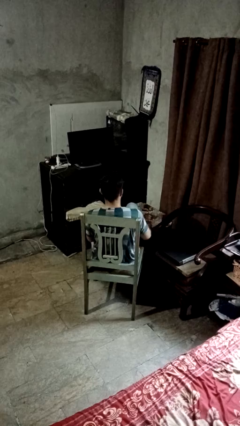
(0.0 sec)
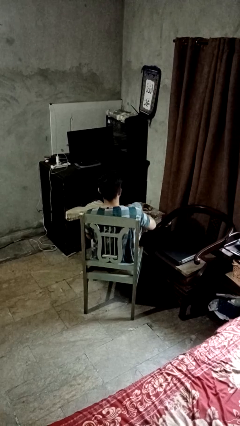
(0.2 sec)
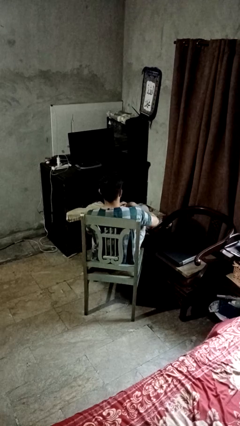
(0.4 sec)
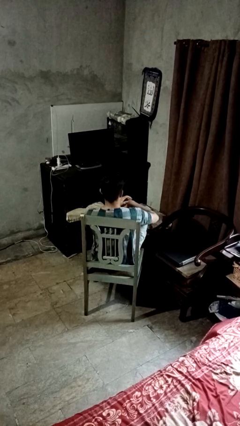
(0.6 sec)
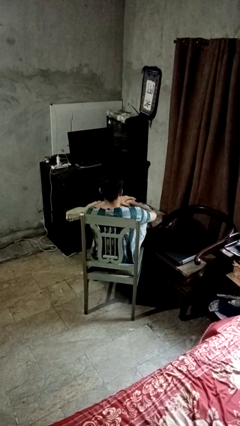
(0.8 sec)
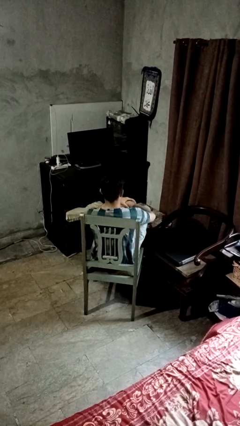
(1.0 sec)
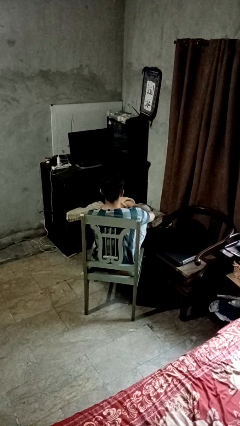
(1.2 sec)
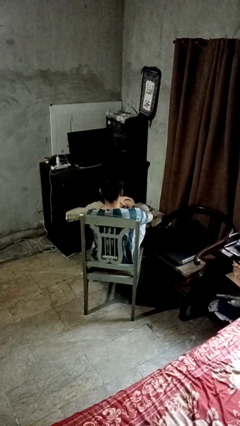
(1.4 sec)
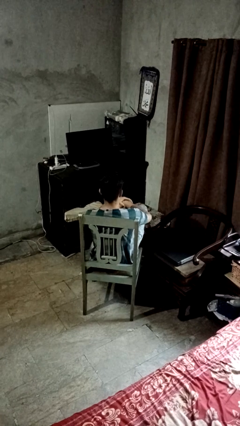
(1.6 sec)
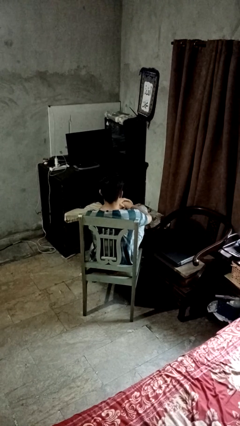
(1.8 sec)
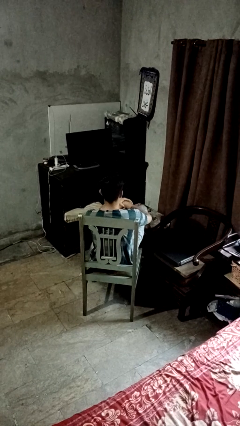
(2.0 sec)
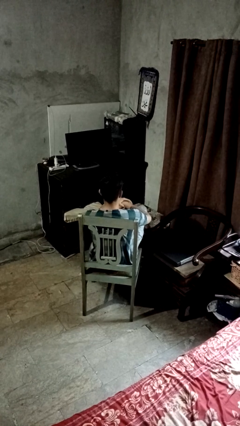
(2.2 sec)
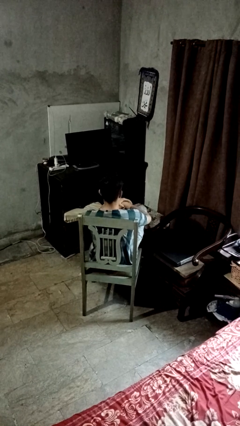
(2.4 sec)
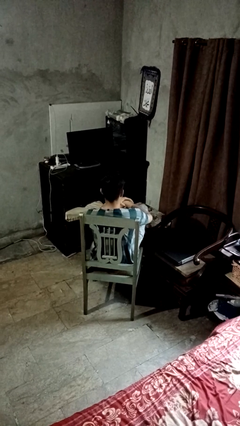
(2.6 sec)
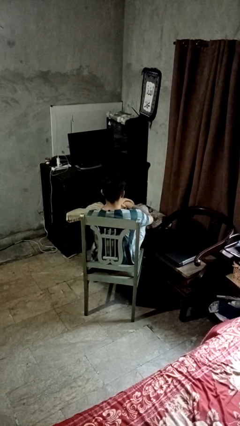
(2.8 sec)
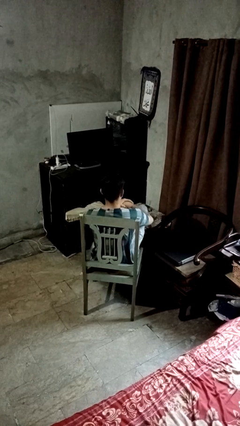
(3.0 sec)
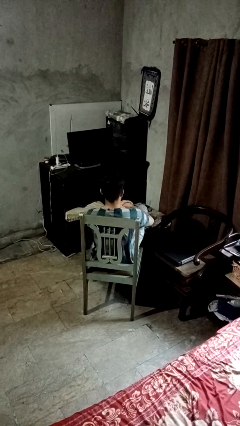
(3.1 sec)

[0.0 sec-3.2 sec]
person puts feet up

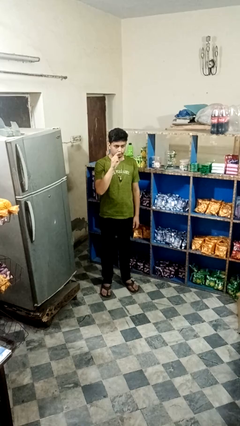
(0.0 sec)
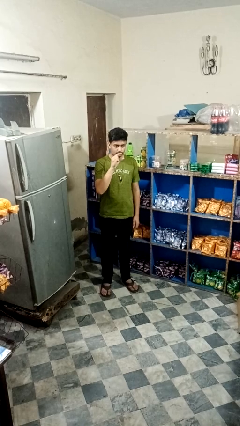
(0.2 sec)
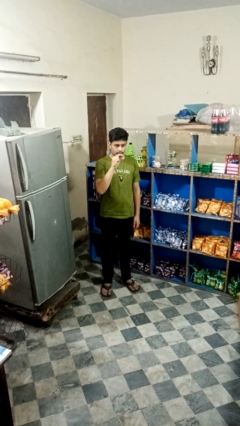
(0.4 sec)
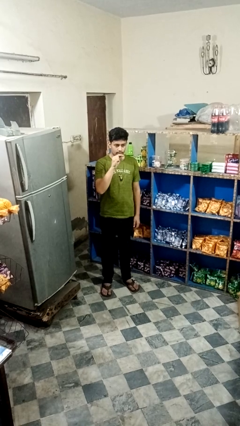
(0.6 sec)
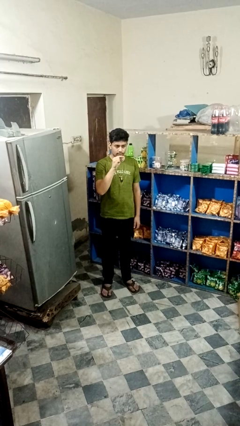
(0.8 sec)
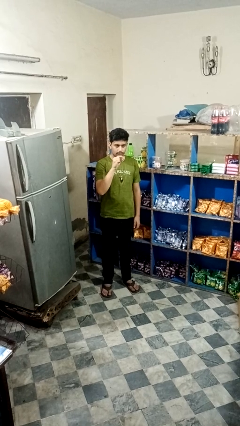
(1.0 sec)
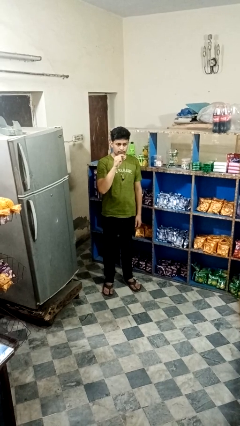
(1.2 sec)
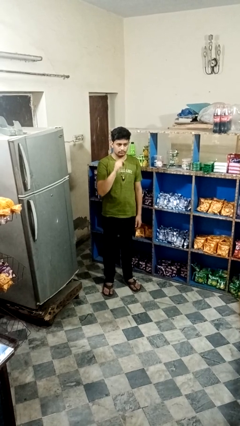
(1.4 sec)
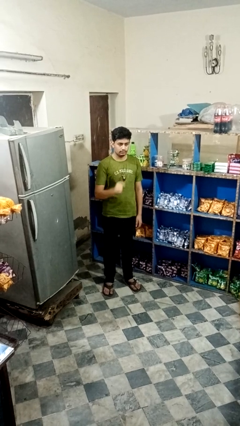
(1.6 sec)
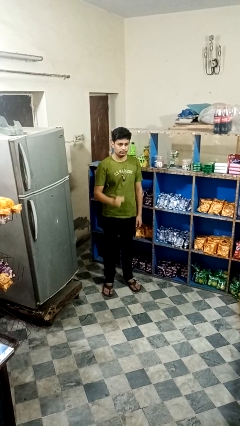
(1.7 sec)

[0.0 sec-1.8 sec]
person gestures zoom out

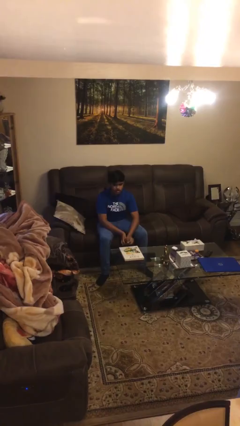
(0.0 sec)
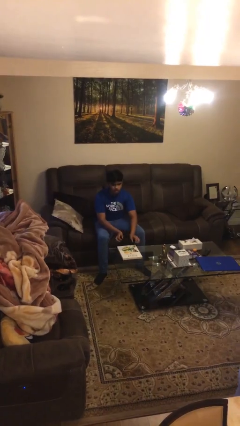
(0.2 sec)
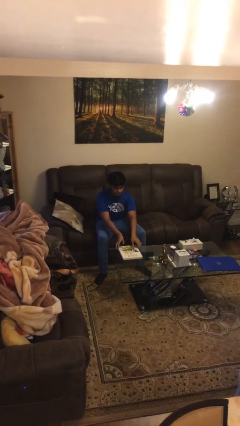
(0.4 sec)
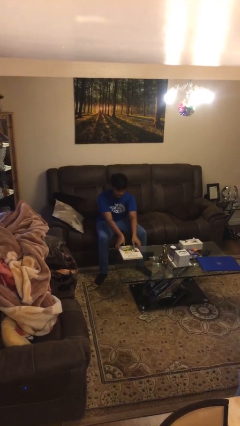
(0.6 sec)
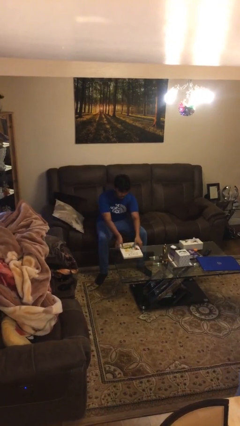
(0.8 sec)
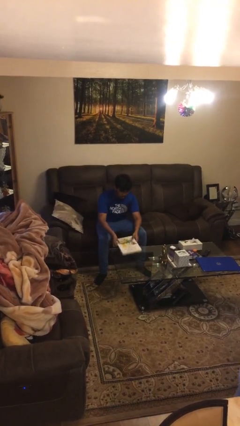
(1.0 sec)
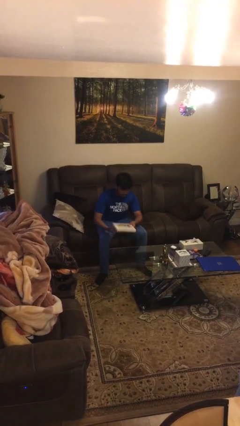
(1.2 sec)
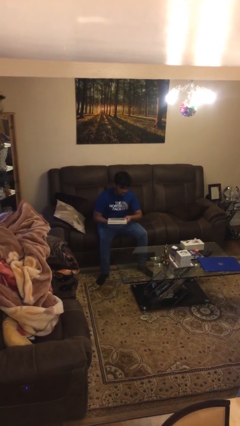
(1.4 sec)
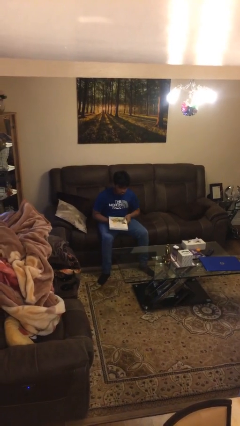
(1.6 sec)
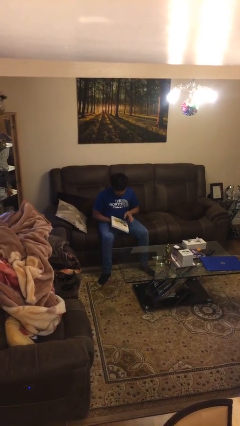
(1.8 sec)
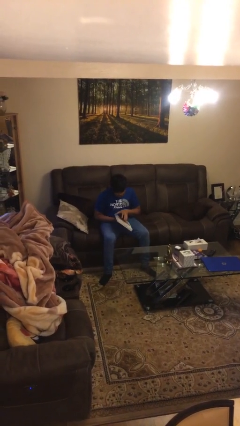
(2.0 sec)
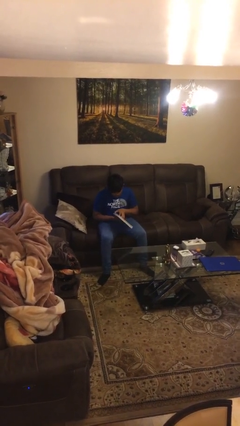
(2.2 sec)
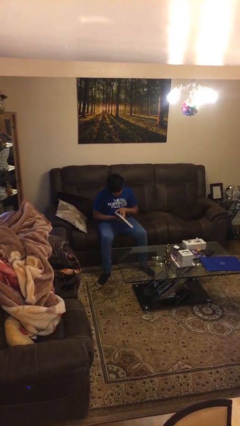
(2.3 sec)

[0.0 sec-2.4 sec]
person picks up object from table

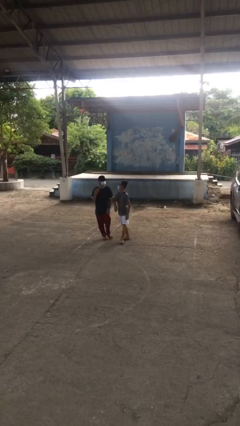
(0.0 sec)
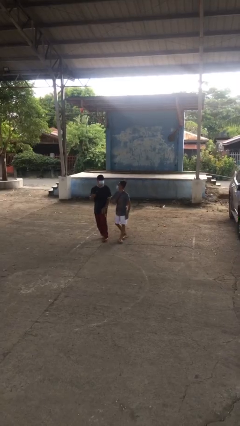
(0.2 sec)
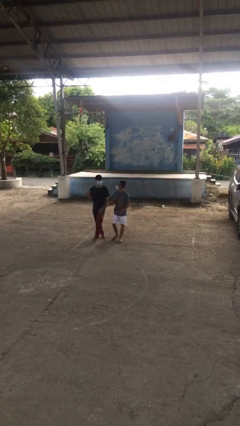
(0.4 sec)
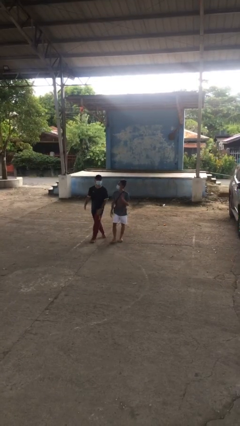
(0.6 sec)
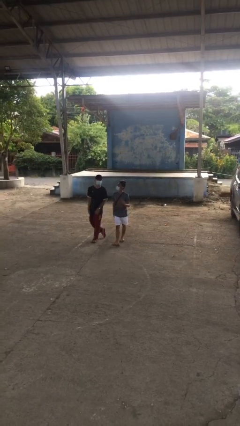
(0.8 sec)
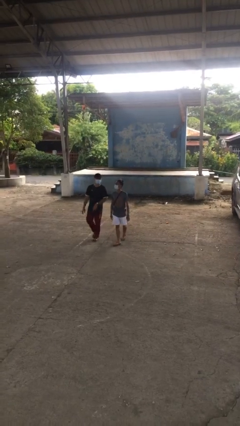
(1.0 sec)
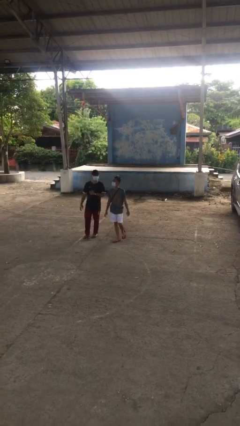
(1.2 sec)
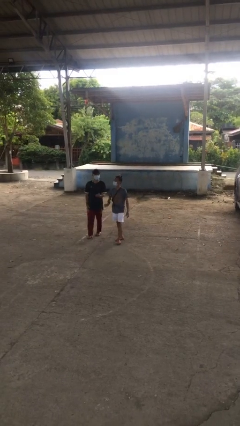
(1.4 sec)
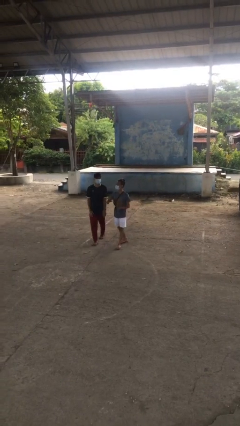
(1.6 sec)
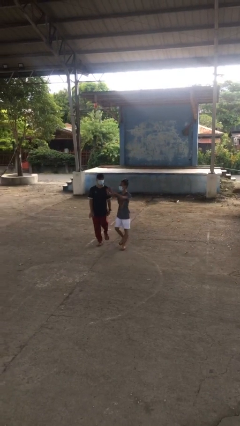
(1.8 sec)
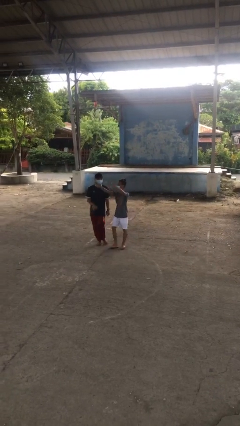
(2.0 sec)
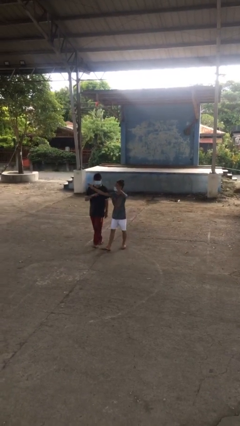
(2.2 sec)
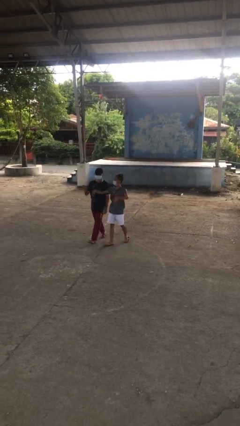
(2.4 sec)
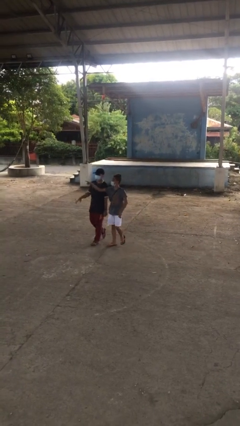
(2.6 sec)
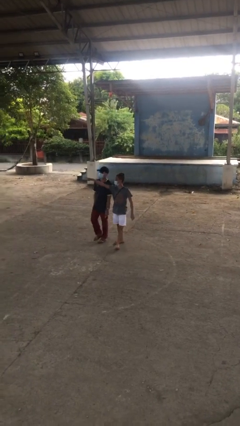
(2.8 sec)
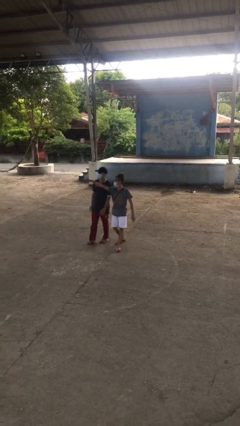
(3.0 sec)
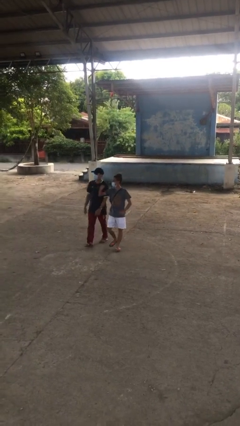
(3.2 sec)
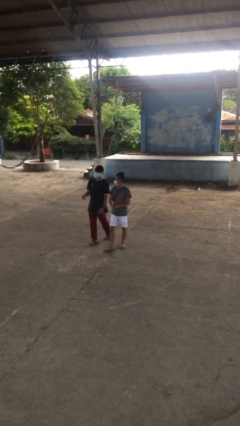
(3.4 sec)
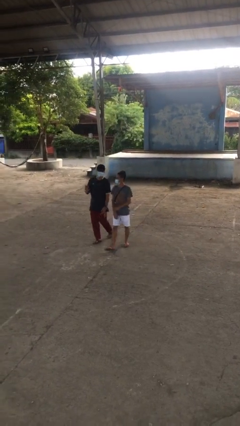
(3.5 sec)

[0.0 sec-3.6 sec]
person talks to person

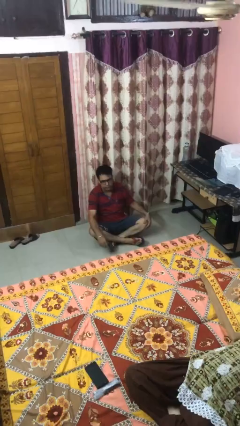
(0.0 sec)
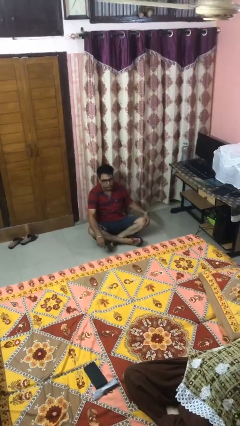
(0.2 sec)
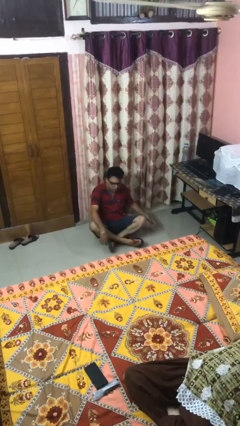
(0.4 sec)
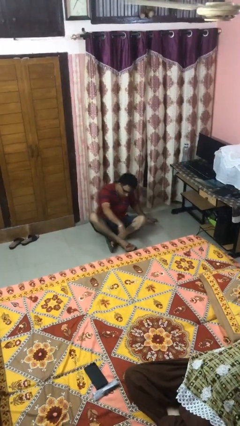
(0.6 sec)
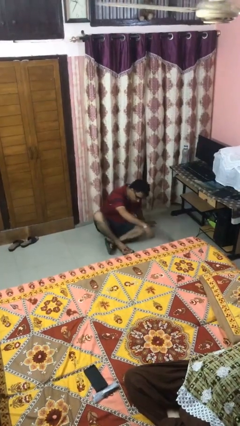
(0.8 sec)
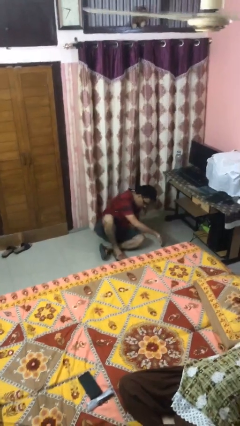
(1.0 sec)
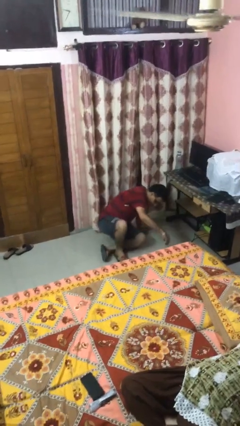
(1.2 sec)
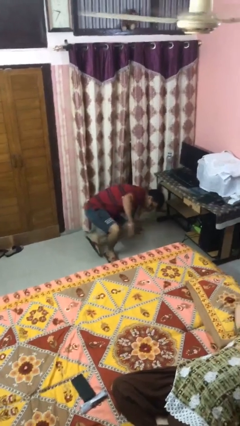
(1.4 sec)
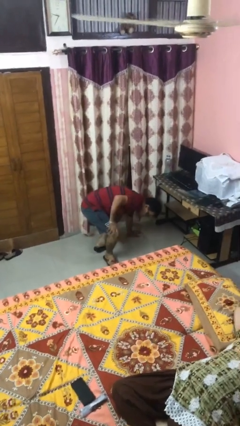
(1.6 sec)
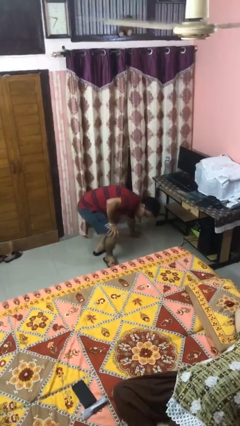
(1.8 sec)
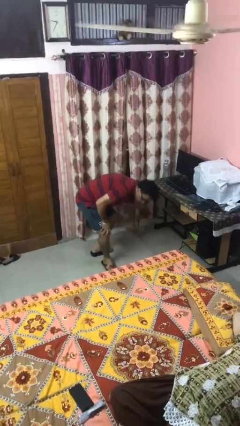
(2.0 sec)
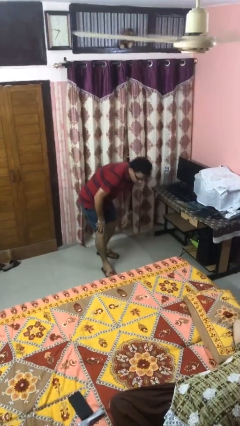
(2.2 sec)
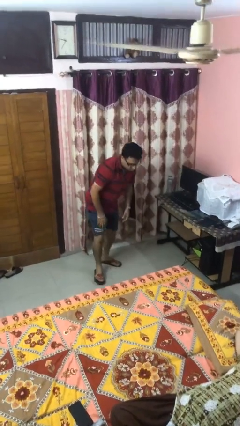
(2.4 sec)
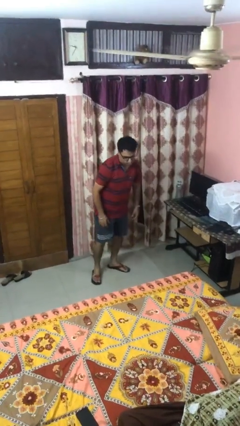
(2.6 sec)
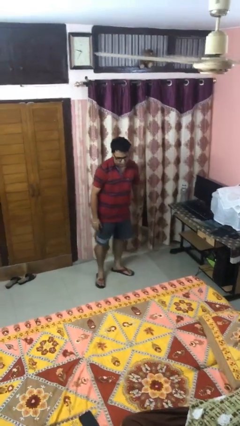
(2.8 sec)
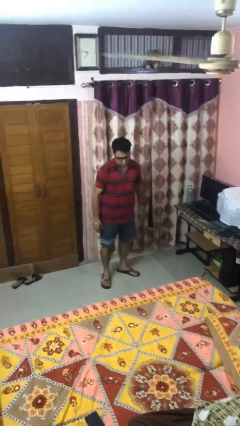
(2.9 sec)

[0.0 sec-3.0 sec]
person stands up from floor

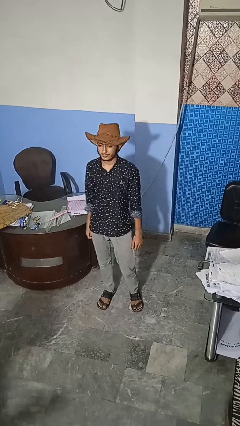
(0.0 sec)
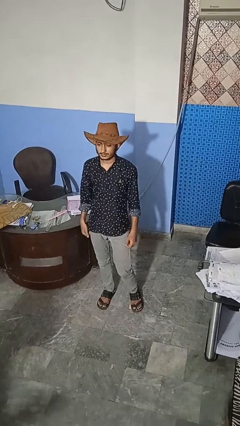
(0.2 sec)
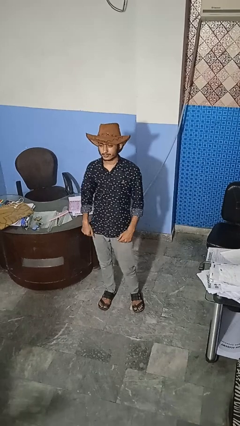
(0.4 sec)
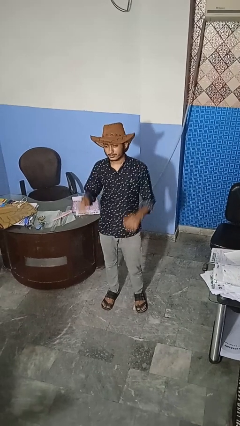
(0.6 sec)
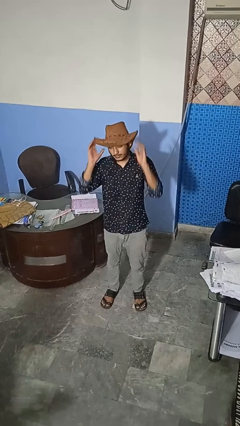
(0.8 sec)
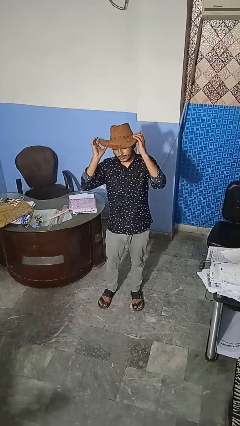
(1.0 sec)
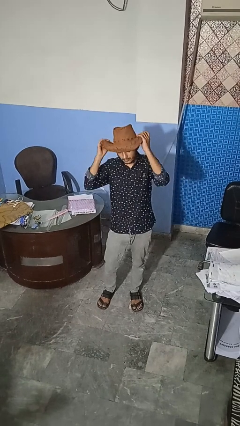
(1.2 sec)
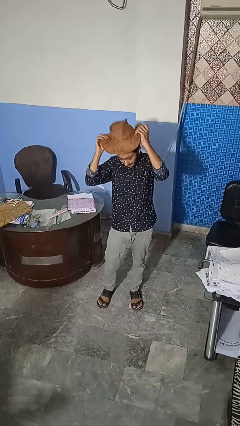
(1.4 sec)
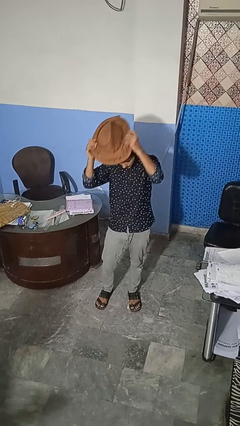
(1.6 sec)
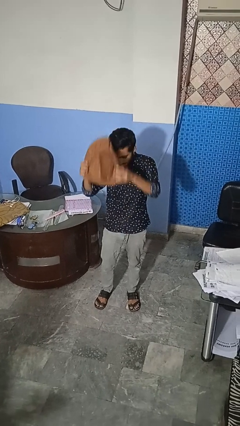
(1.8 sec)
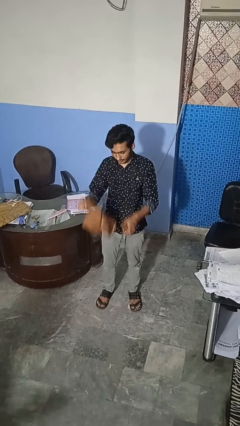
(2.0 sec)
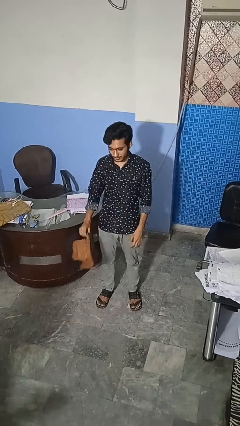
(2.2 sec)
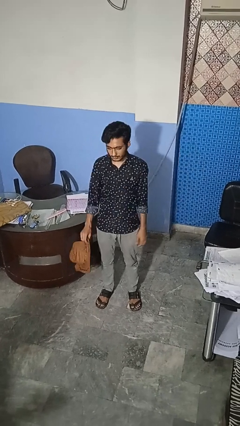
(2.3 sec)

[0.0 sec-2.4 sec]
person takes off hat

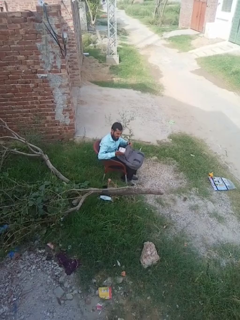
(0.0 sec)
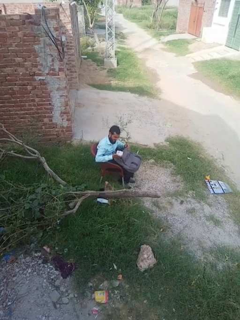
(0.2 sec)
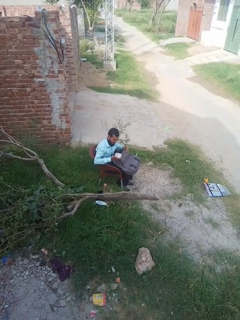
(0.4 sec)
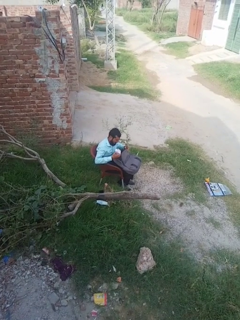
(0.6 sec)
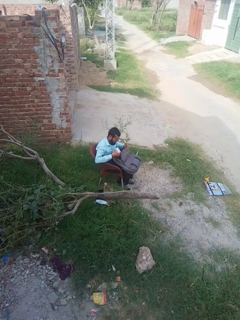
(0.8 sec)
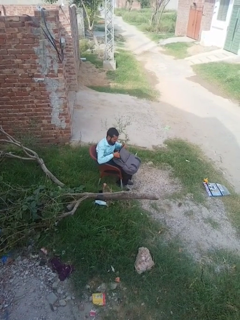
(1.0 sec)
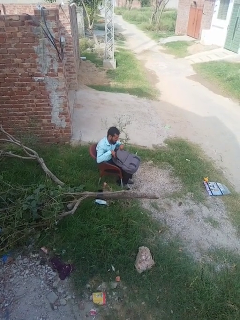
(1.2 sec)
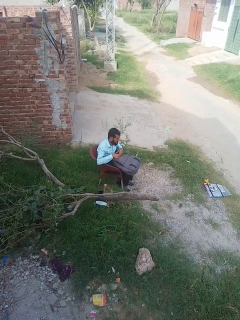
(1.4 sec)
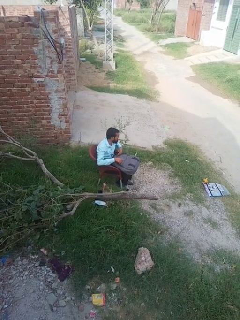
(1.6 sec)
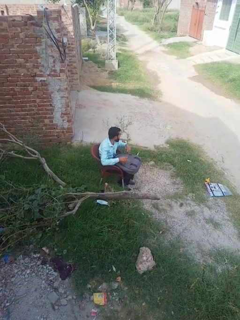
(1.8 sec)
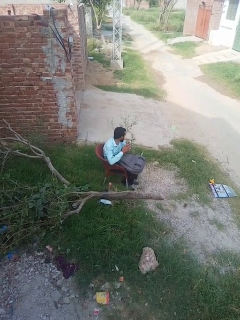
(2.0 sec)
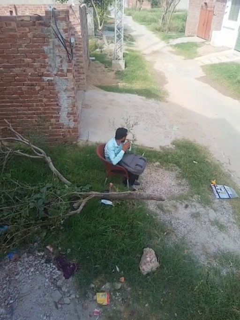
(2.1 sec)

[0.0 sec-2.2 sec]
person puts object into backpack
